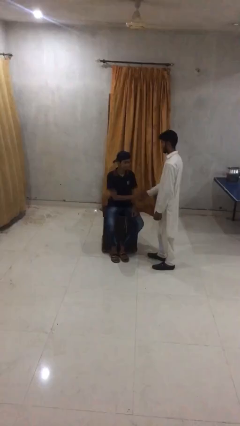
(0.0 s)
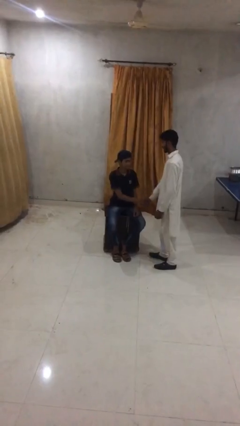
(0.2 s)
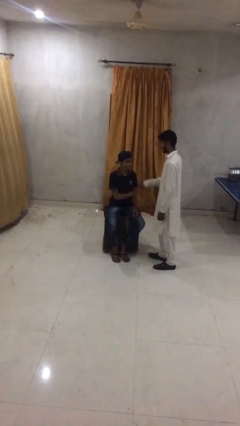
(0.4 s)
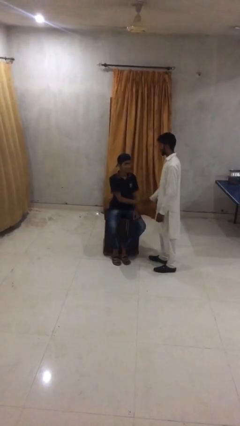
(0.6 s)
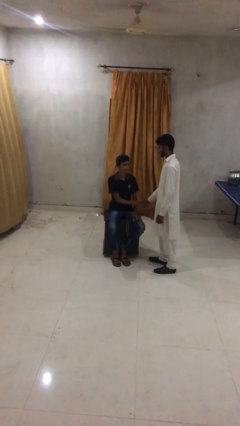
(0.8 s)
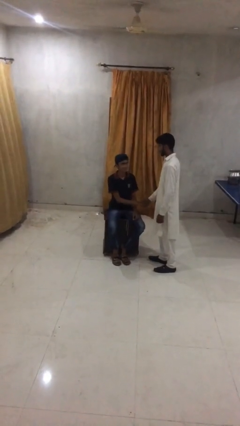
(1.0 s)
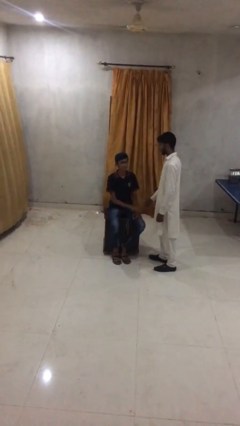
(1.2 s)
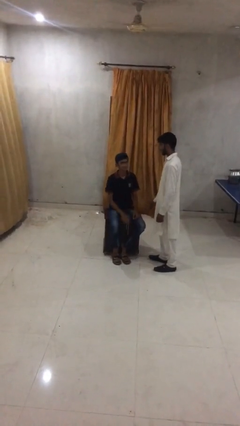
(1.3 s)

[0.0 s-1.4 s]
person shakes hand

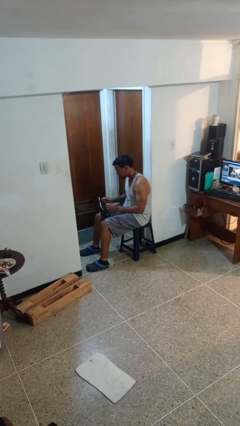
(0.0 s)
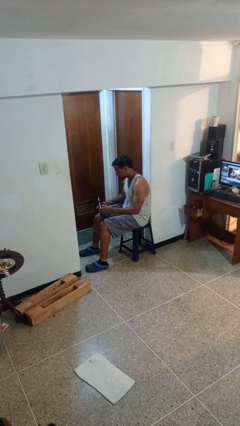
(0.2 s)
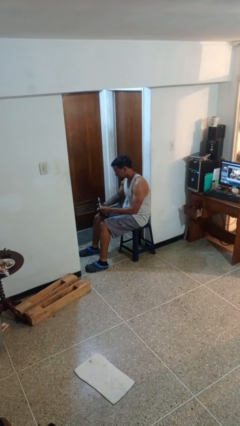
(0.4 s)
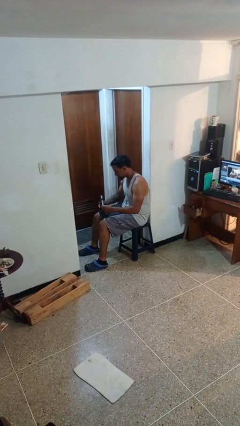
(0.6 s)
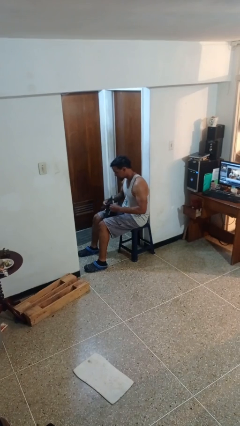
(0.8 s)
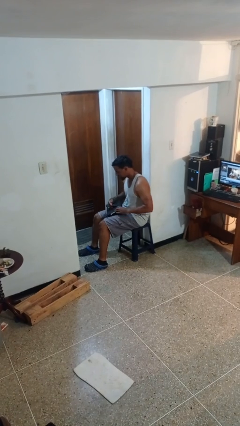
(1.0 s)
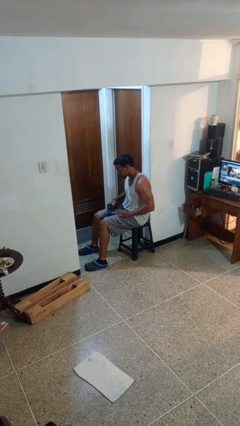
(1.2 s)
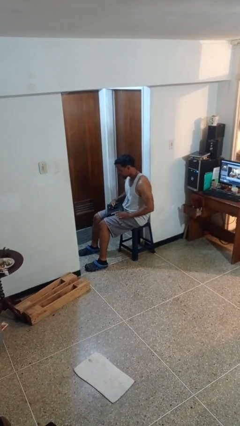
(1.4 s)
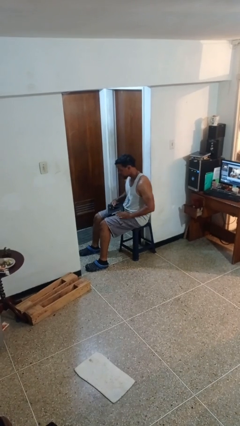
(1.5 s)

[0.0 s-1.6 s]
person closes laptop

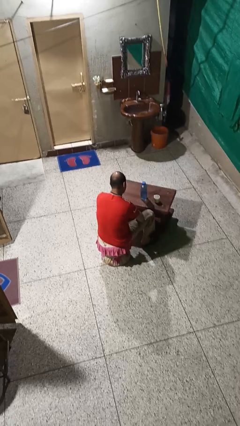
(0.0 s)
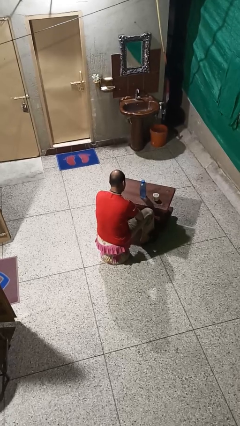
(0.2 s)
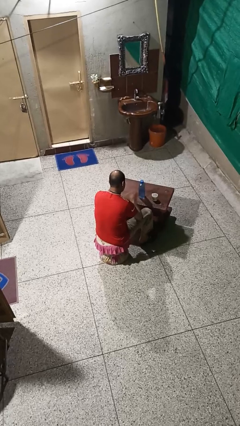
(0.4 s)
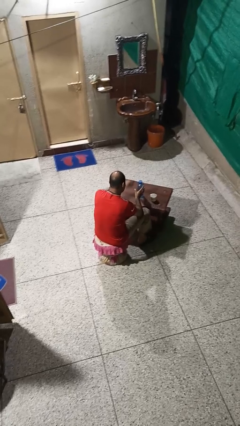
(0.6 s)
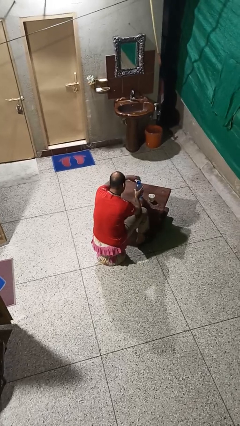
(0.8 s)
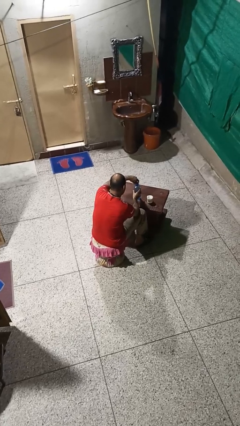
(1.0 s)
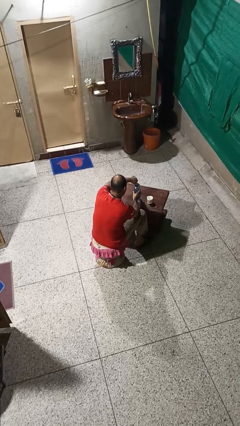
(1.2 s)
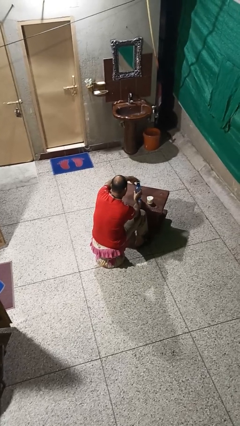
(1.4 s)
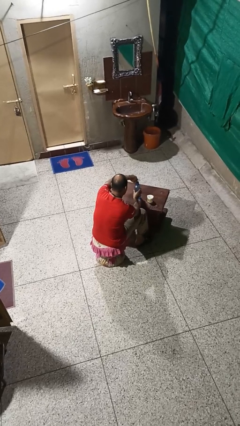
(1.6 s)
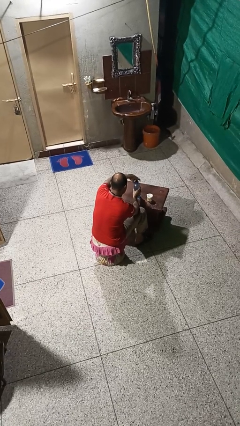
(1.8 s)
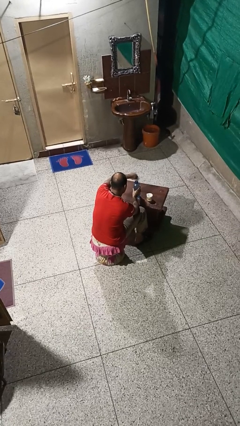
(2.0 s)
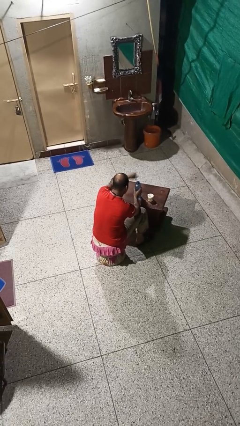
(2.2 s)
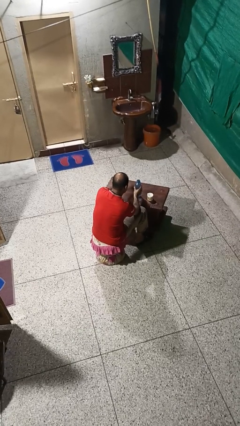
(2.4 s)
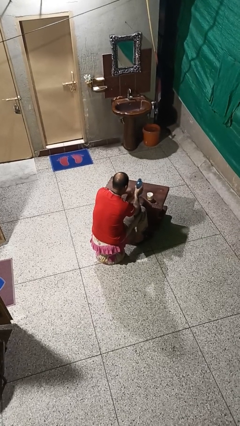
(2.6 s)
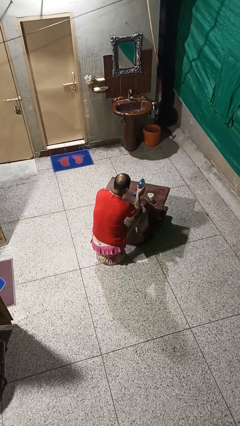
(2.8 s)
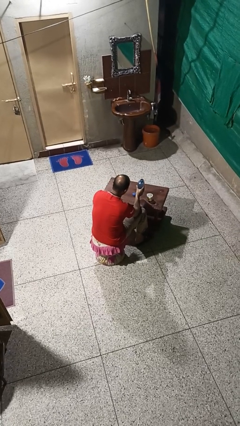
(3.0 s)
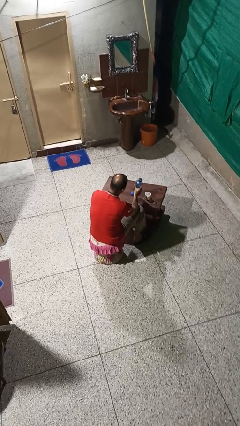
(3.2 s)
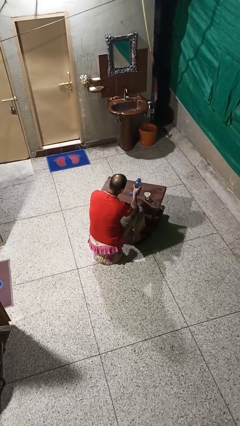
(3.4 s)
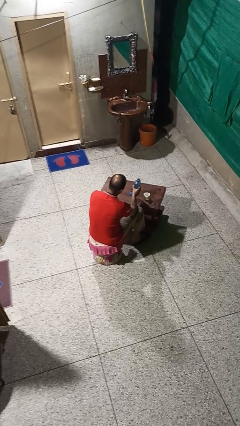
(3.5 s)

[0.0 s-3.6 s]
person unscrews lid from bottle

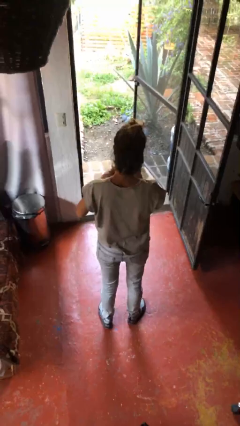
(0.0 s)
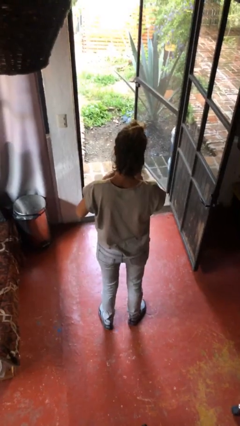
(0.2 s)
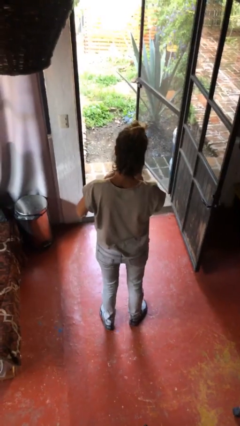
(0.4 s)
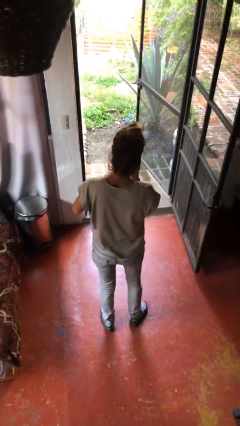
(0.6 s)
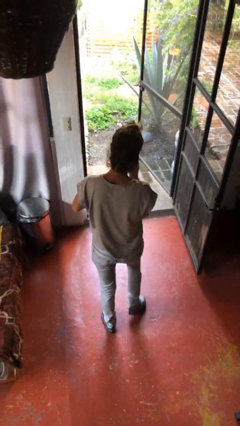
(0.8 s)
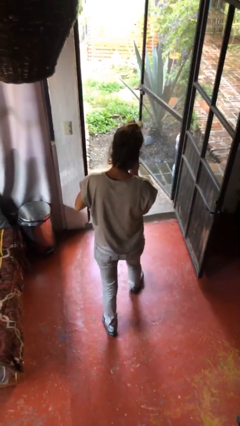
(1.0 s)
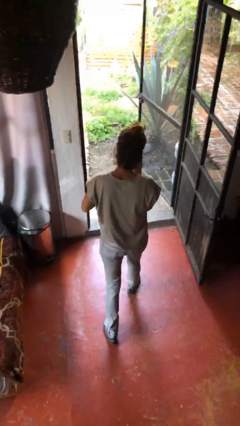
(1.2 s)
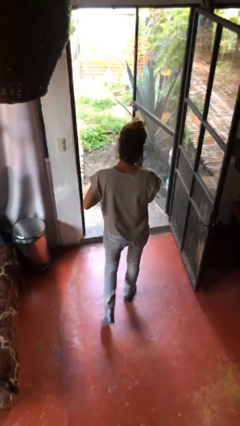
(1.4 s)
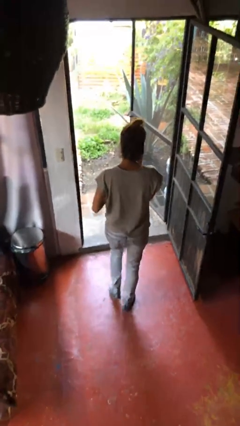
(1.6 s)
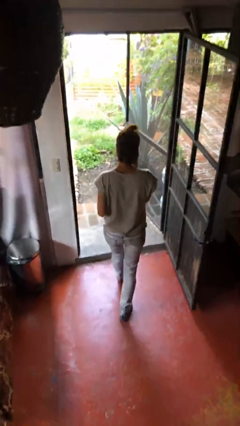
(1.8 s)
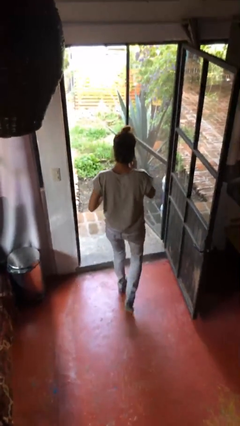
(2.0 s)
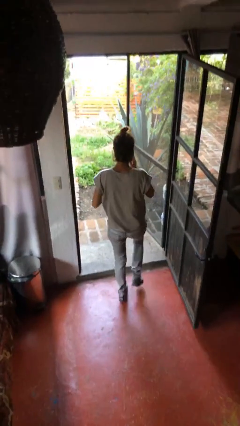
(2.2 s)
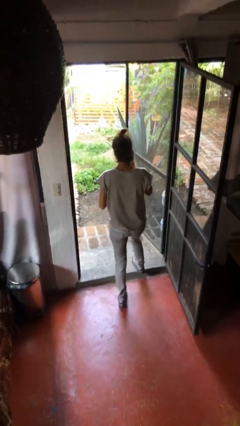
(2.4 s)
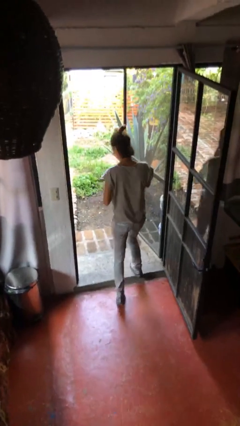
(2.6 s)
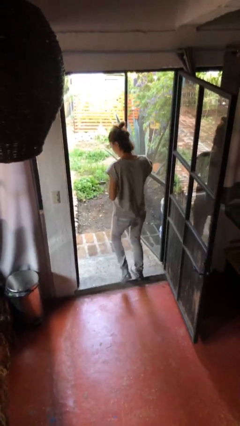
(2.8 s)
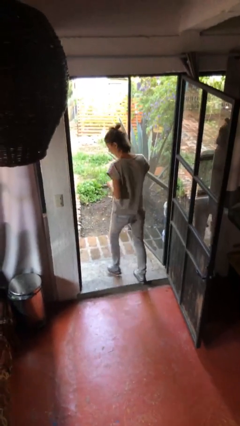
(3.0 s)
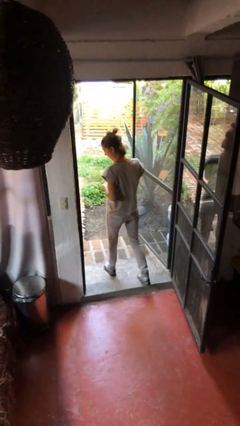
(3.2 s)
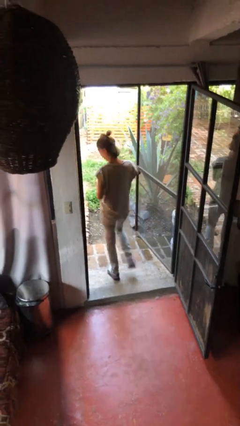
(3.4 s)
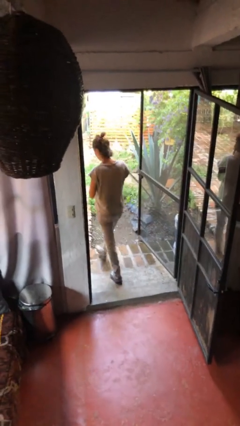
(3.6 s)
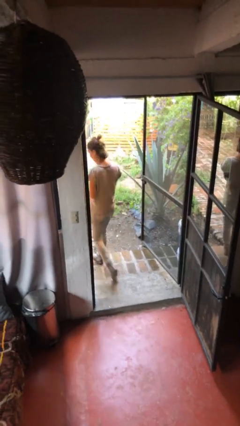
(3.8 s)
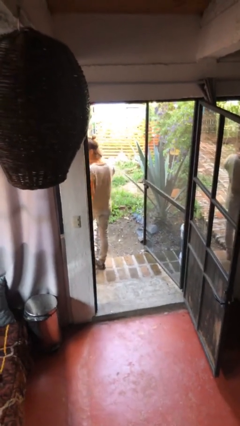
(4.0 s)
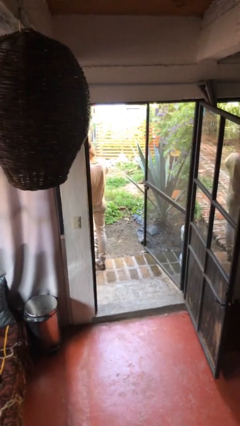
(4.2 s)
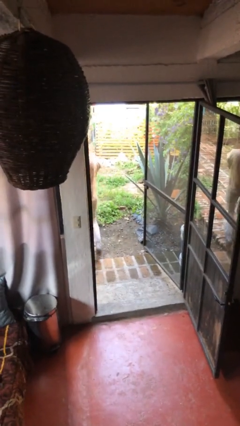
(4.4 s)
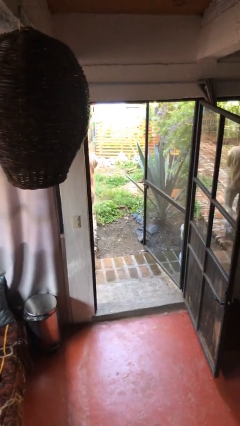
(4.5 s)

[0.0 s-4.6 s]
person exits scene through structure

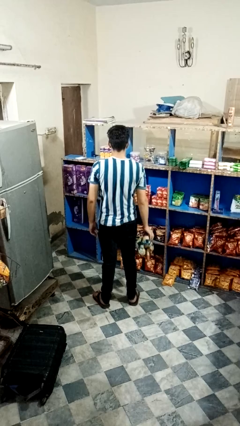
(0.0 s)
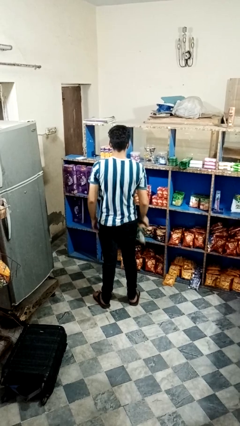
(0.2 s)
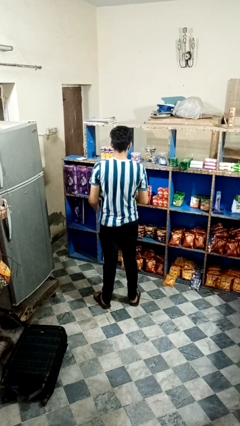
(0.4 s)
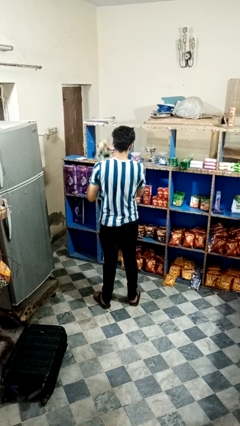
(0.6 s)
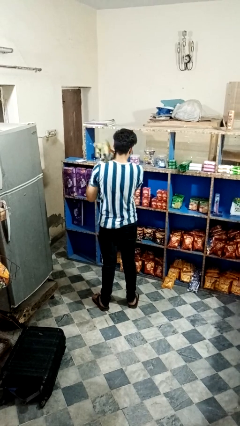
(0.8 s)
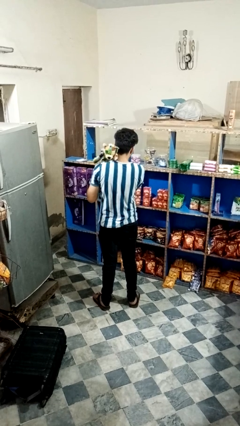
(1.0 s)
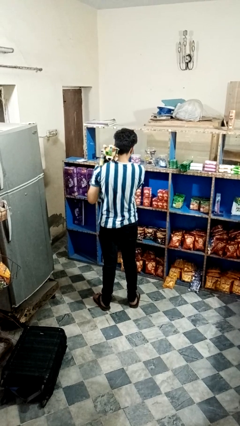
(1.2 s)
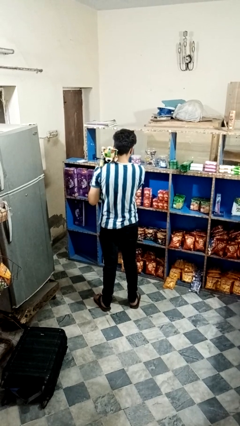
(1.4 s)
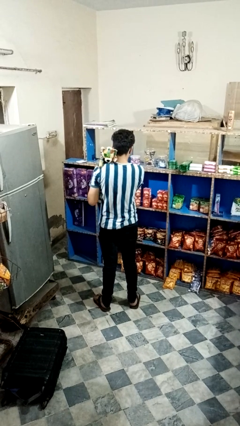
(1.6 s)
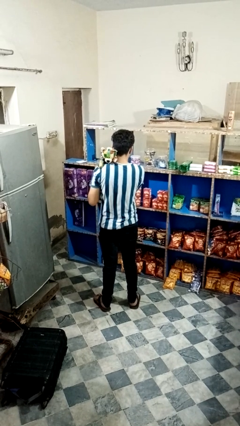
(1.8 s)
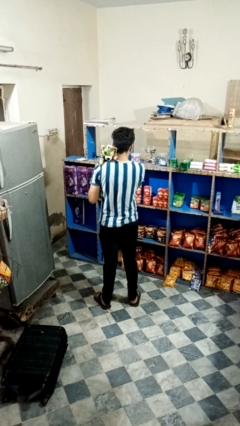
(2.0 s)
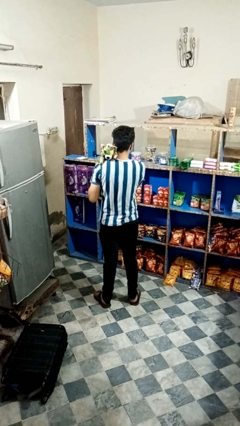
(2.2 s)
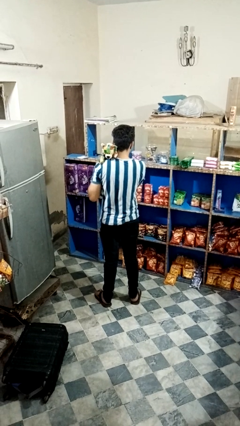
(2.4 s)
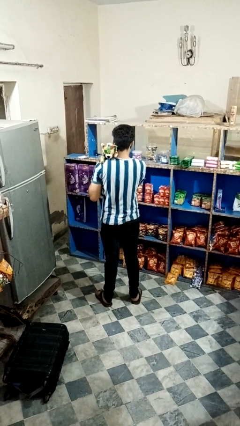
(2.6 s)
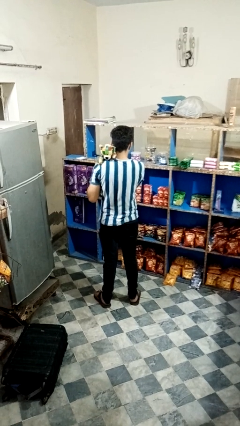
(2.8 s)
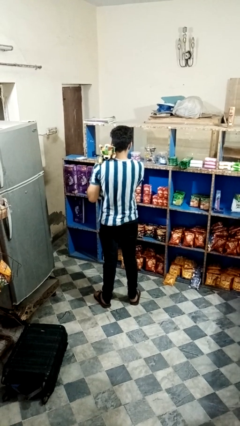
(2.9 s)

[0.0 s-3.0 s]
person hugs stuffed animal

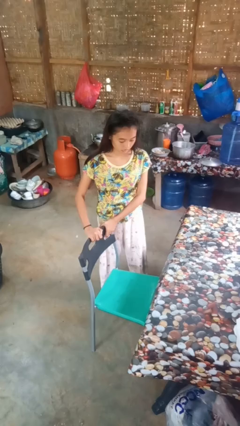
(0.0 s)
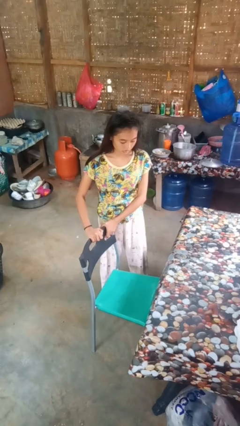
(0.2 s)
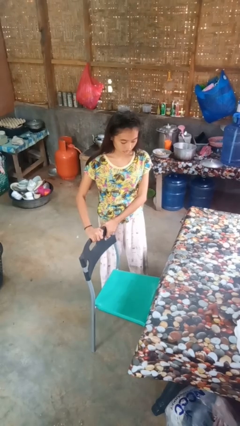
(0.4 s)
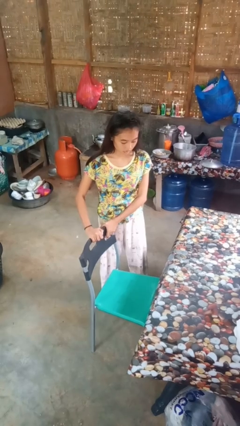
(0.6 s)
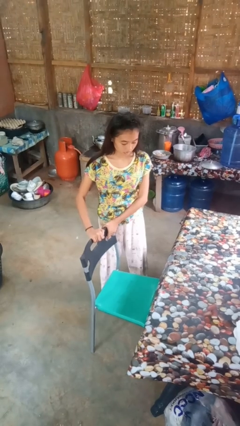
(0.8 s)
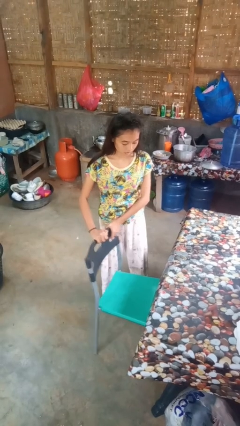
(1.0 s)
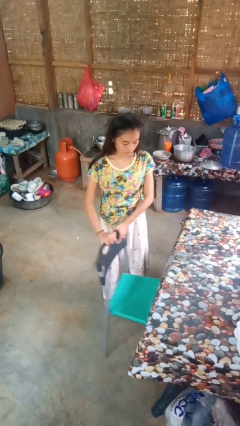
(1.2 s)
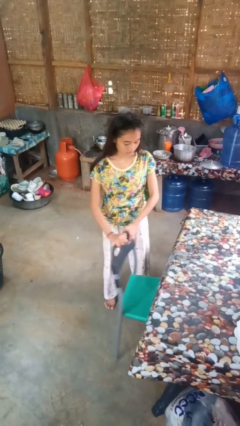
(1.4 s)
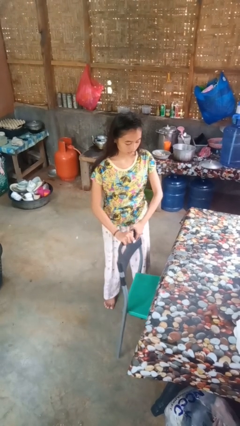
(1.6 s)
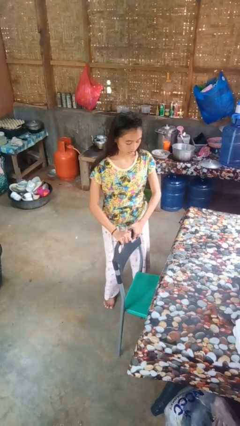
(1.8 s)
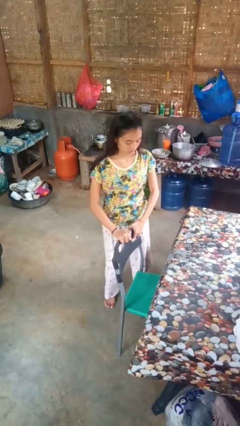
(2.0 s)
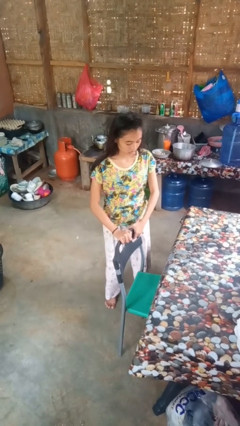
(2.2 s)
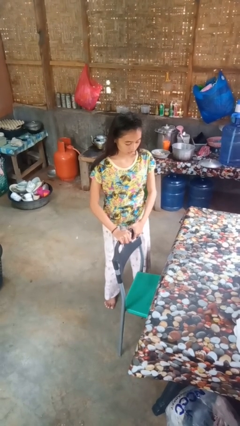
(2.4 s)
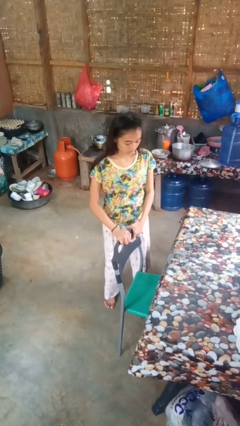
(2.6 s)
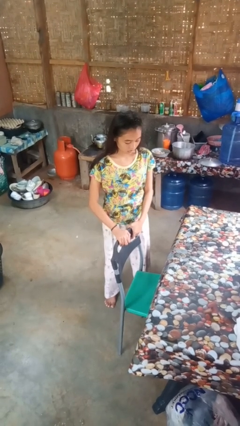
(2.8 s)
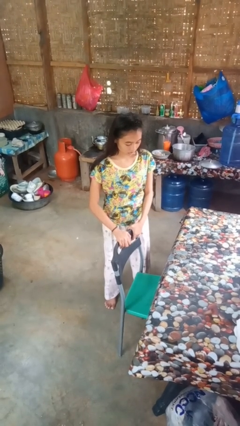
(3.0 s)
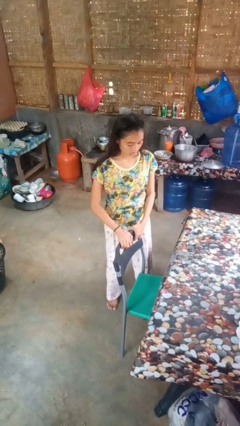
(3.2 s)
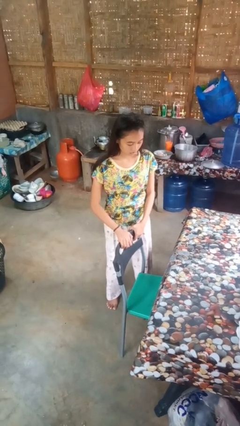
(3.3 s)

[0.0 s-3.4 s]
person pushes in chair

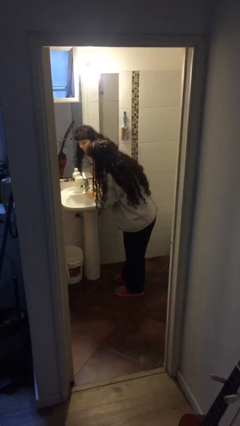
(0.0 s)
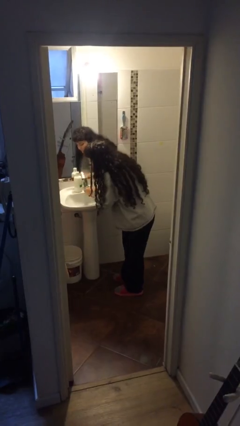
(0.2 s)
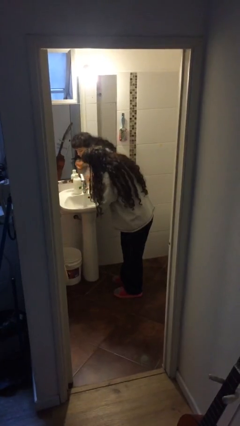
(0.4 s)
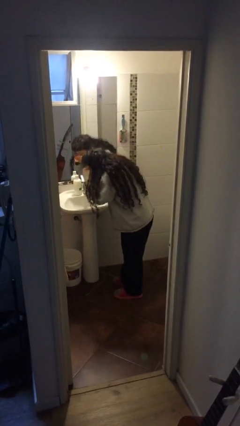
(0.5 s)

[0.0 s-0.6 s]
person dries face with towel
